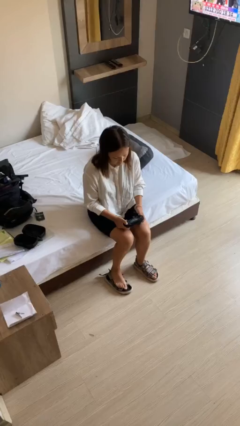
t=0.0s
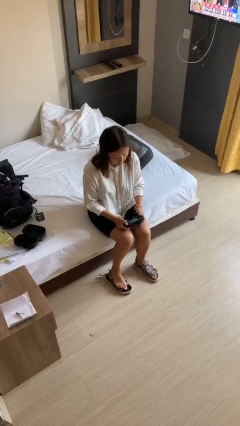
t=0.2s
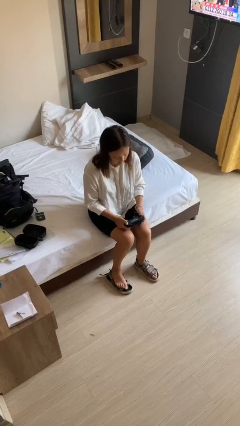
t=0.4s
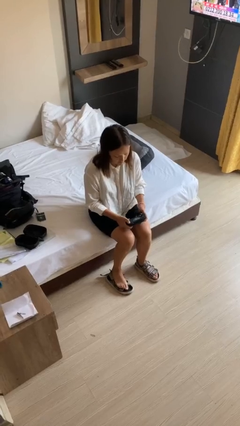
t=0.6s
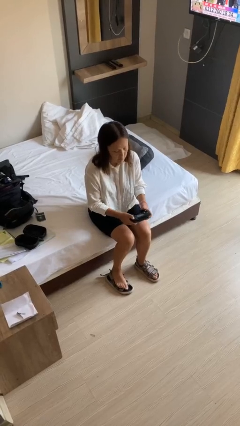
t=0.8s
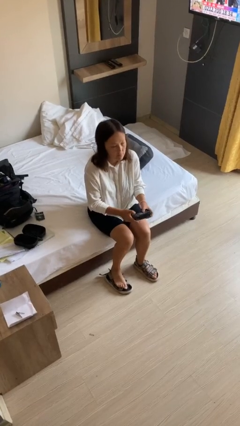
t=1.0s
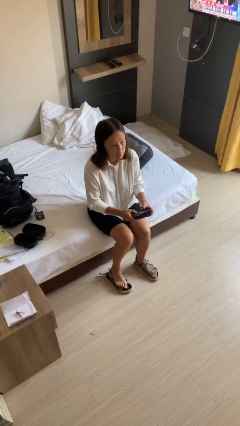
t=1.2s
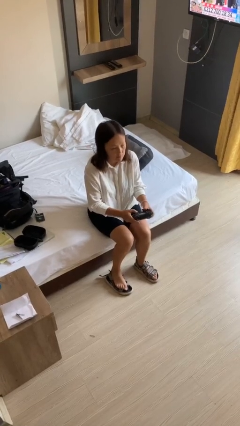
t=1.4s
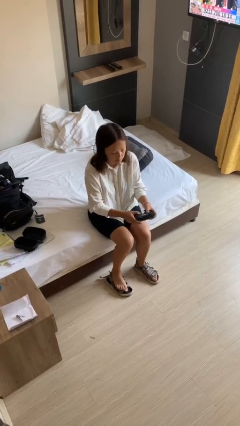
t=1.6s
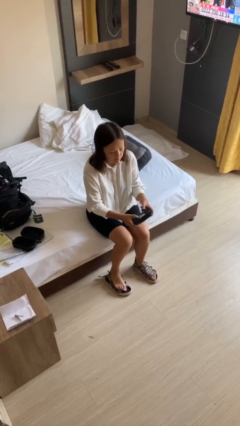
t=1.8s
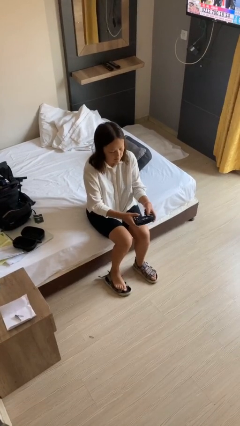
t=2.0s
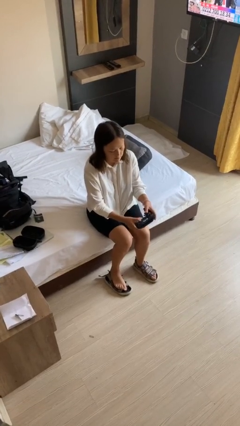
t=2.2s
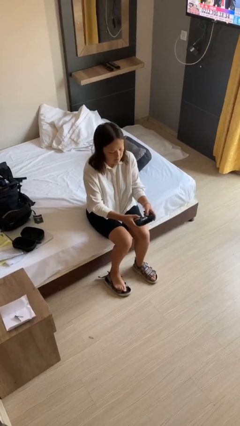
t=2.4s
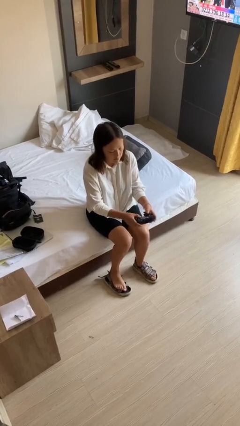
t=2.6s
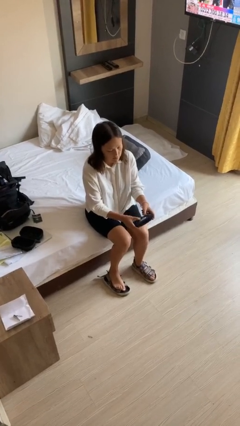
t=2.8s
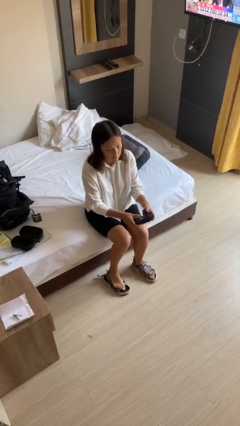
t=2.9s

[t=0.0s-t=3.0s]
person interacts with handheld game

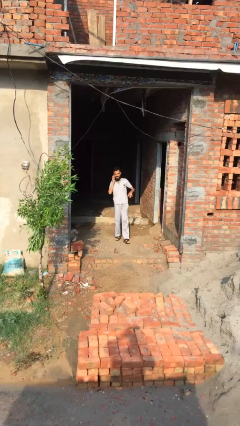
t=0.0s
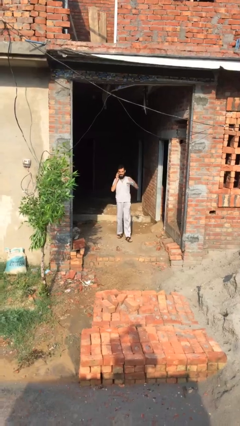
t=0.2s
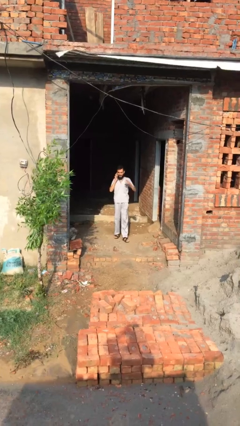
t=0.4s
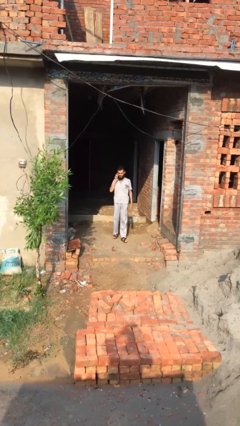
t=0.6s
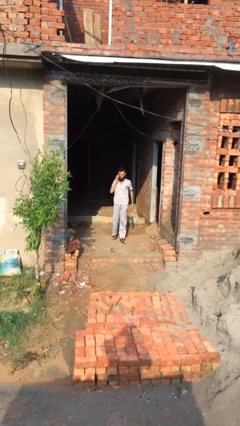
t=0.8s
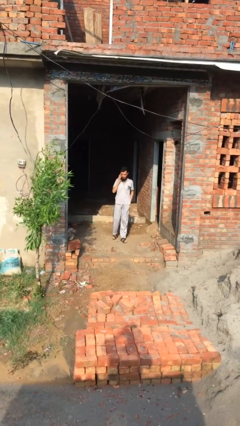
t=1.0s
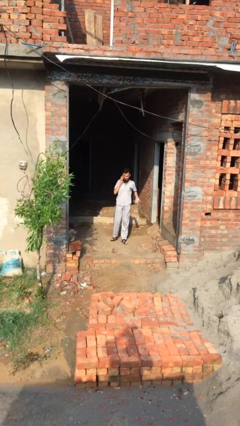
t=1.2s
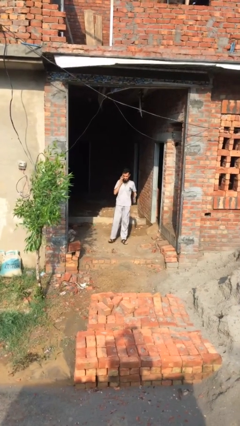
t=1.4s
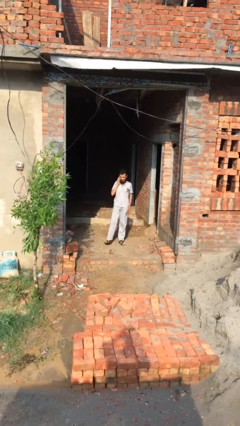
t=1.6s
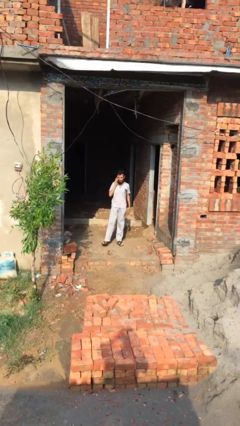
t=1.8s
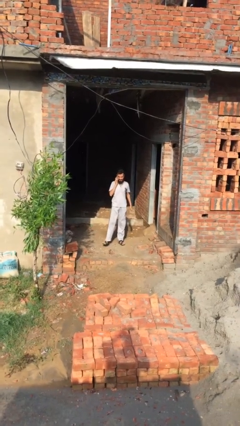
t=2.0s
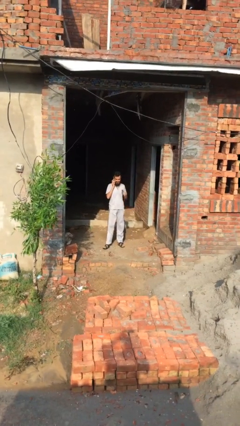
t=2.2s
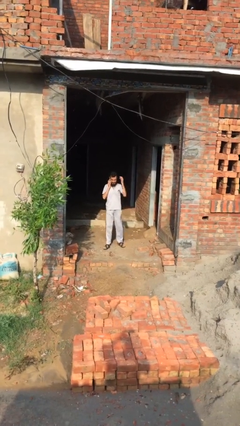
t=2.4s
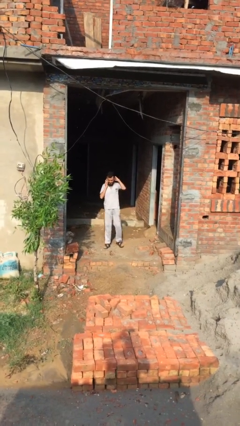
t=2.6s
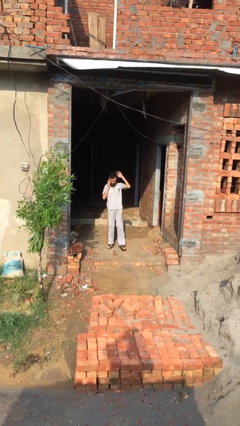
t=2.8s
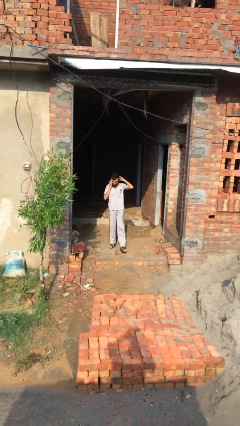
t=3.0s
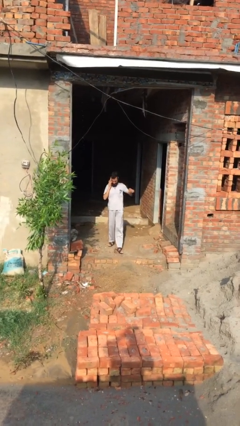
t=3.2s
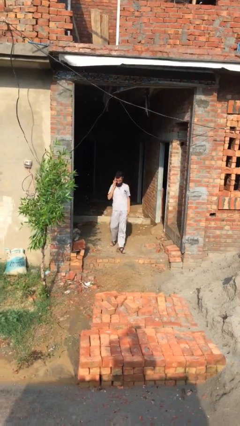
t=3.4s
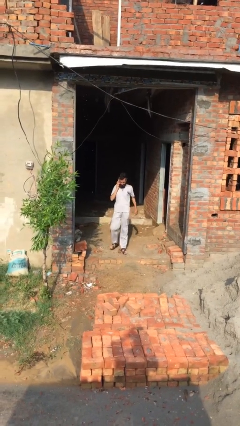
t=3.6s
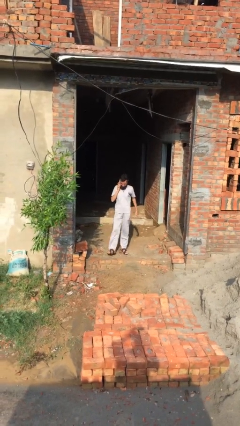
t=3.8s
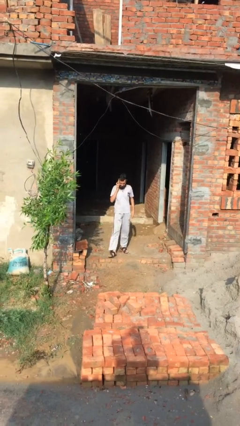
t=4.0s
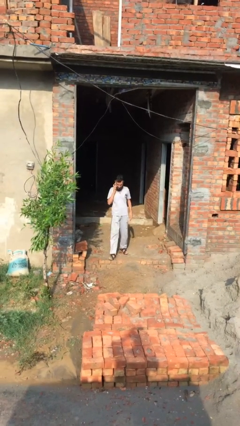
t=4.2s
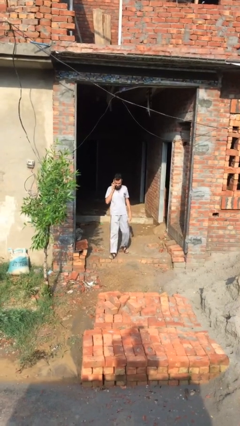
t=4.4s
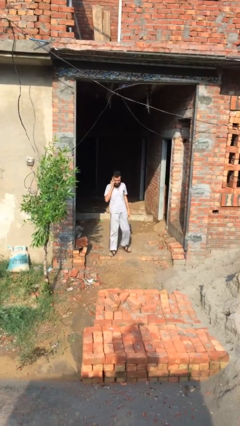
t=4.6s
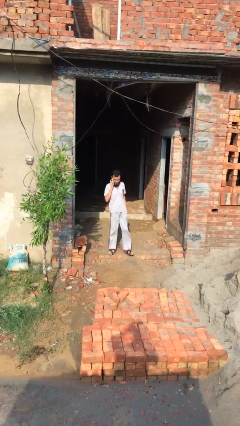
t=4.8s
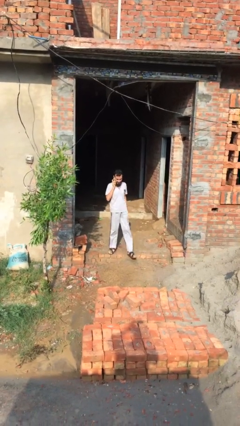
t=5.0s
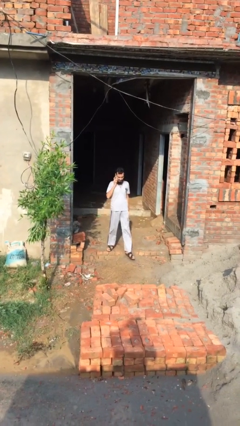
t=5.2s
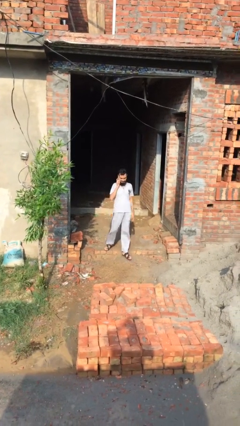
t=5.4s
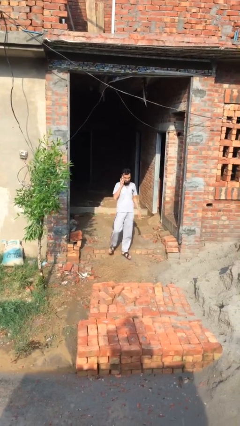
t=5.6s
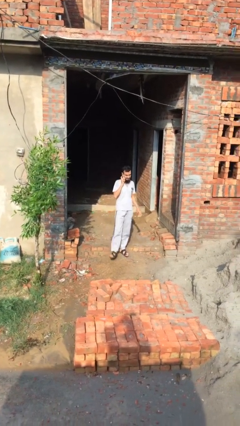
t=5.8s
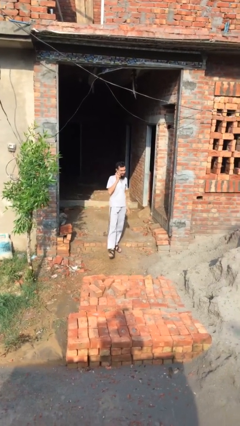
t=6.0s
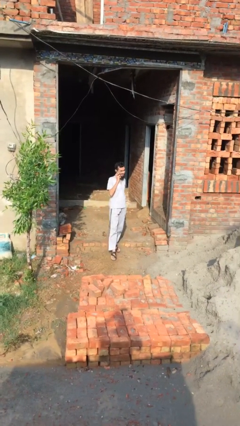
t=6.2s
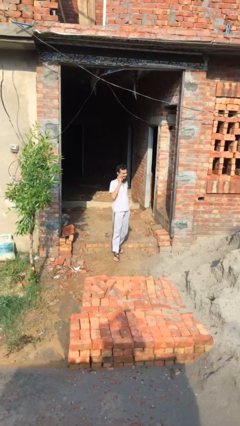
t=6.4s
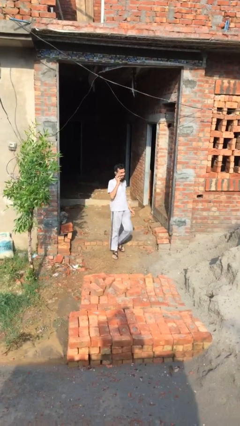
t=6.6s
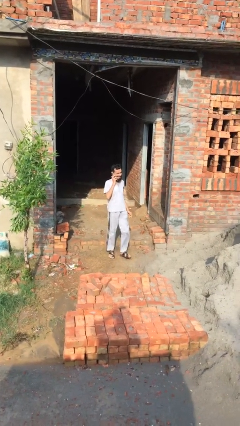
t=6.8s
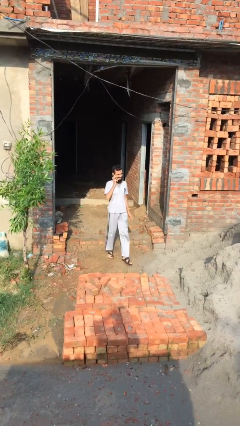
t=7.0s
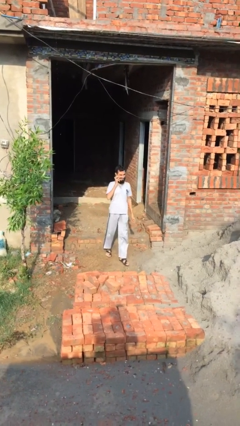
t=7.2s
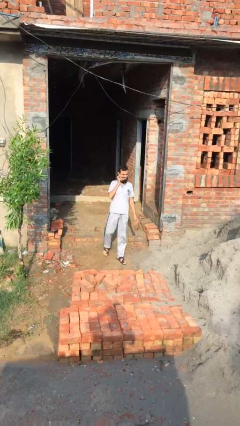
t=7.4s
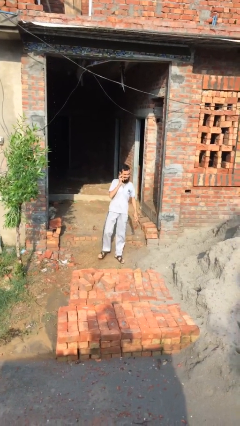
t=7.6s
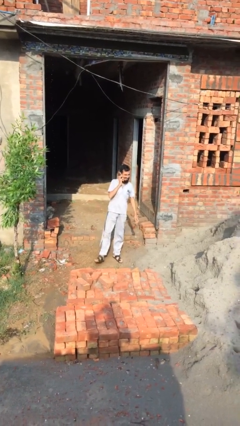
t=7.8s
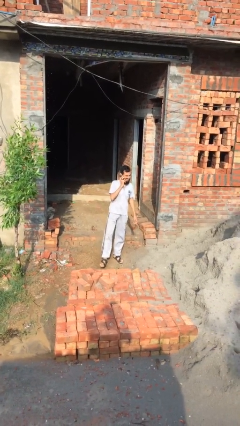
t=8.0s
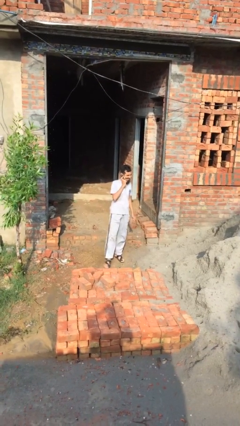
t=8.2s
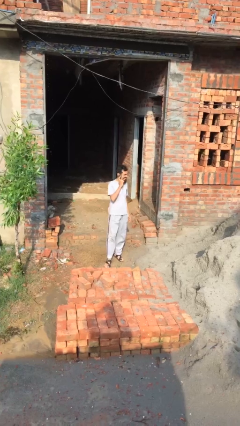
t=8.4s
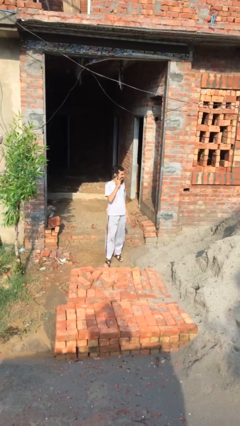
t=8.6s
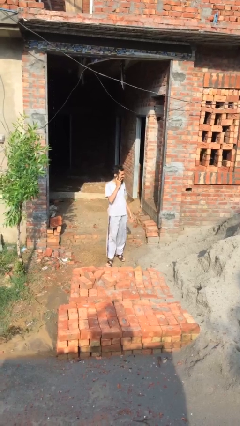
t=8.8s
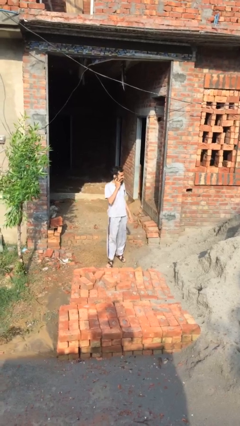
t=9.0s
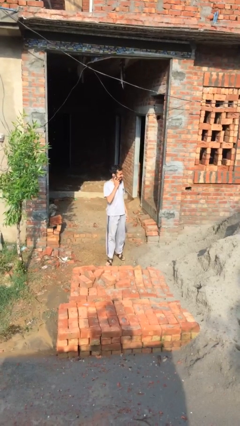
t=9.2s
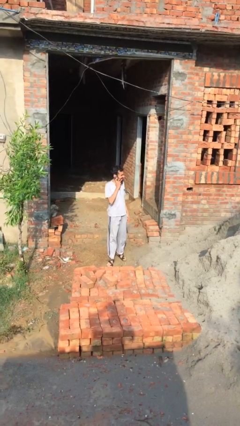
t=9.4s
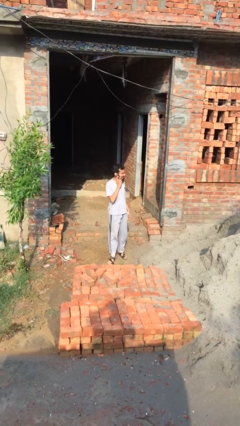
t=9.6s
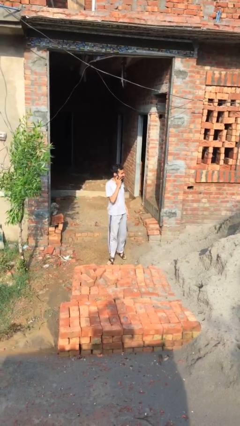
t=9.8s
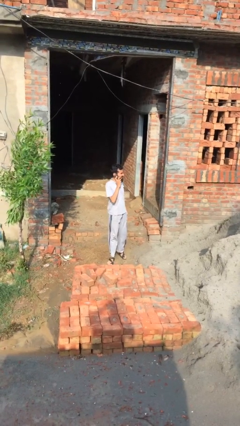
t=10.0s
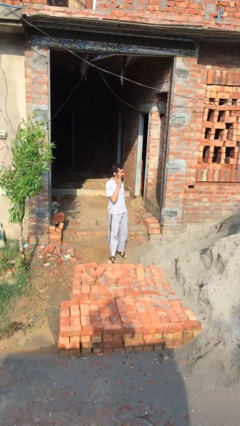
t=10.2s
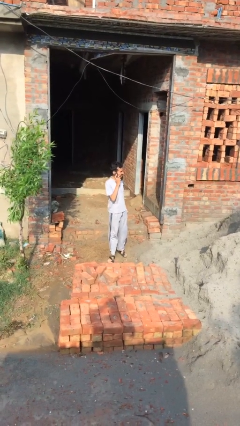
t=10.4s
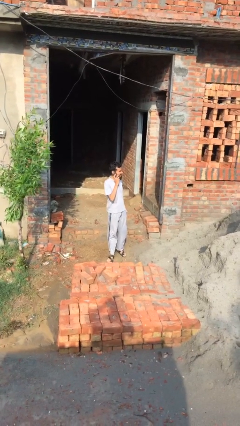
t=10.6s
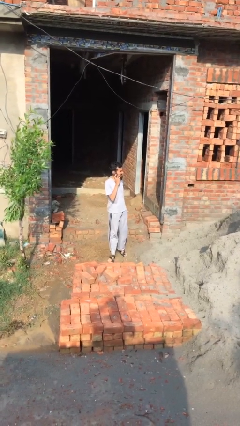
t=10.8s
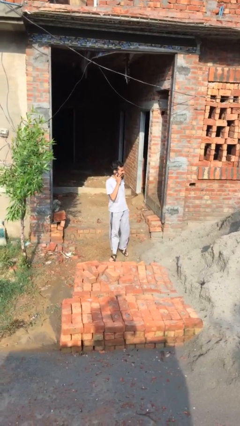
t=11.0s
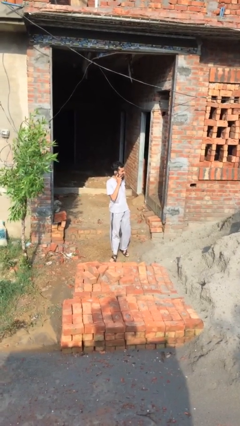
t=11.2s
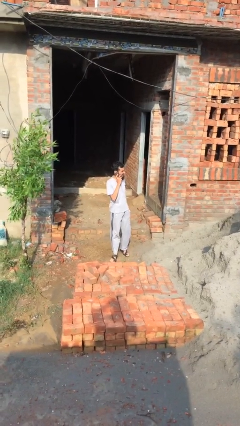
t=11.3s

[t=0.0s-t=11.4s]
person enters scene through structure

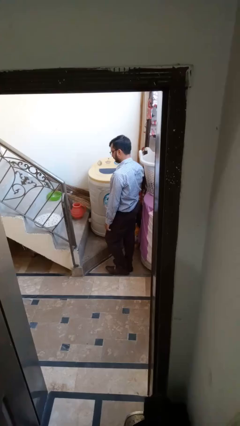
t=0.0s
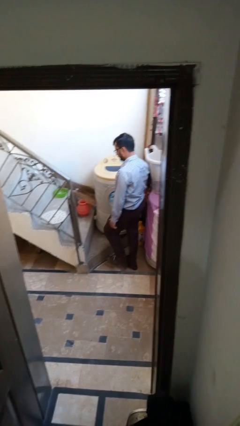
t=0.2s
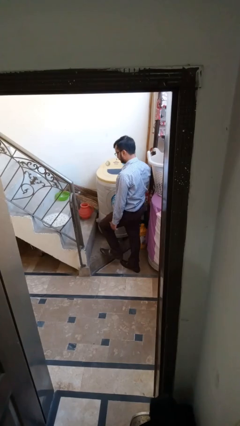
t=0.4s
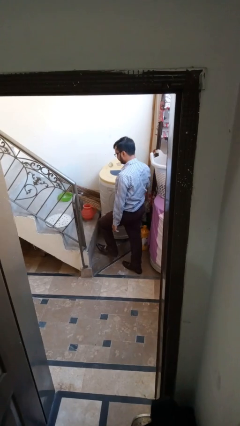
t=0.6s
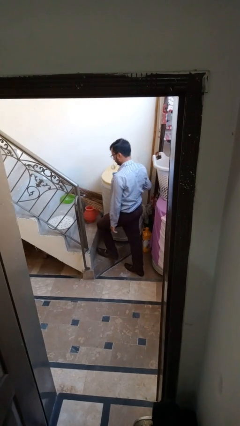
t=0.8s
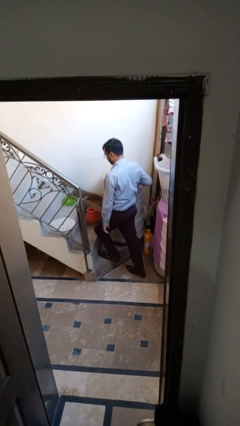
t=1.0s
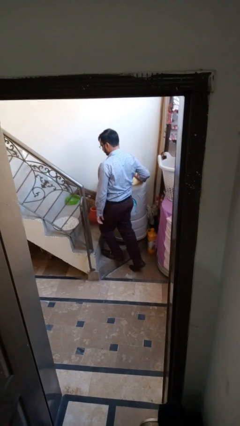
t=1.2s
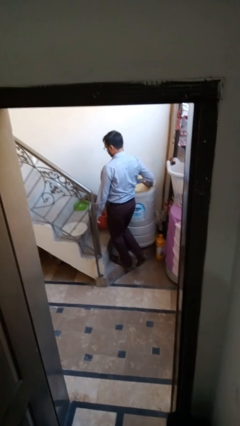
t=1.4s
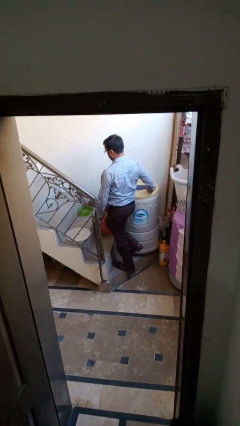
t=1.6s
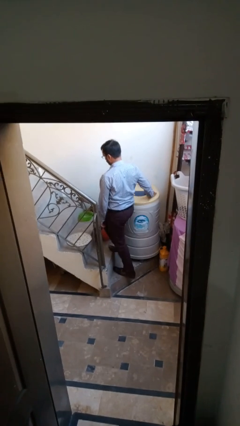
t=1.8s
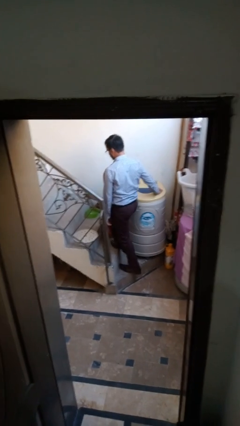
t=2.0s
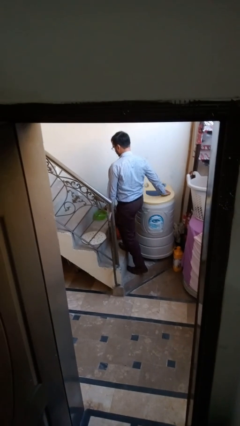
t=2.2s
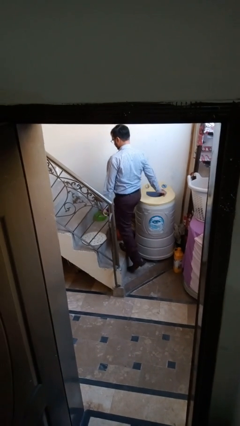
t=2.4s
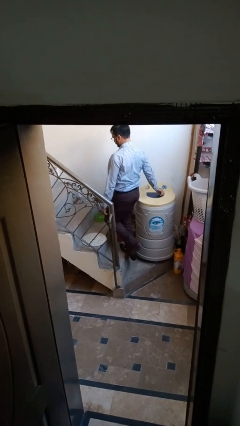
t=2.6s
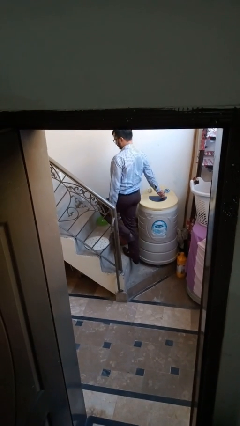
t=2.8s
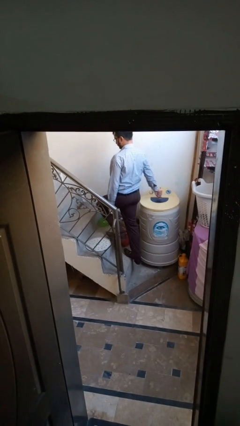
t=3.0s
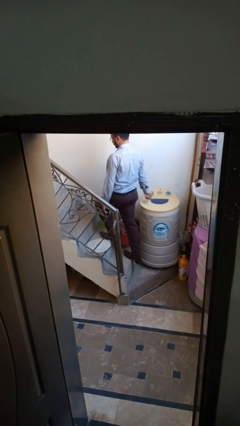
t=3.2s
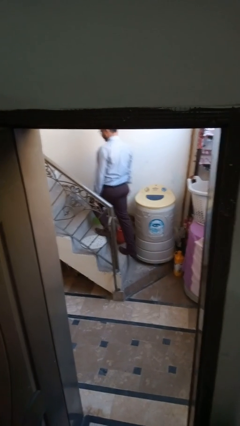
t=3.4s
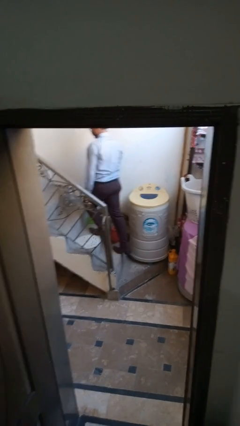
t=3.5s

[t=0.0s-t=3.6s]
person climbs up stairs
